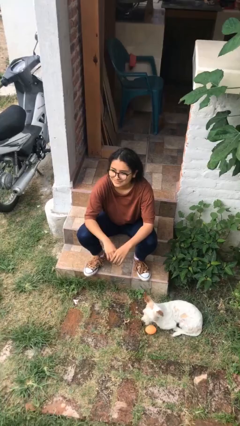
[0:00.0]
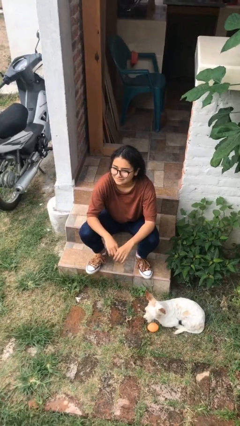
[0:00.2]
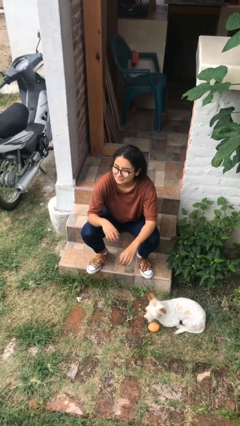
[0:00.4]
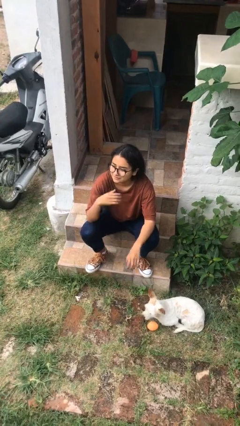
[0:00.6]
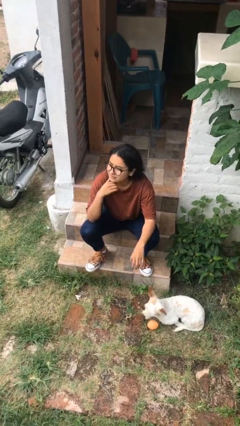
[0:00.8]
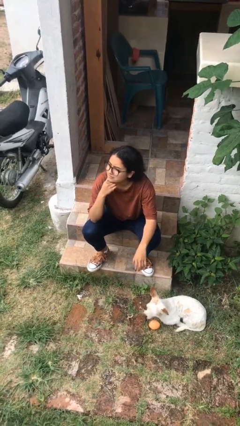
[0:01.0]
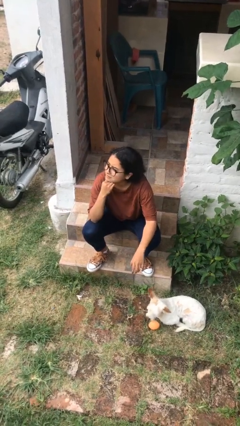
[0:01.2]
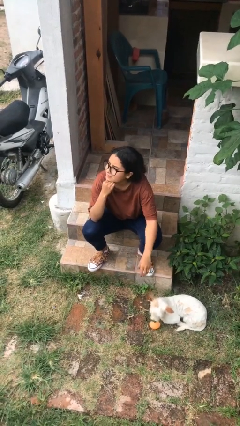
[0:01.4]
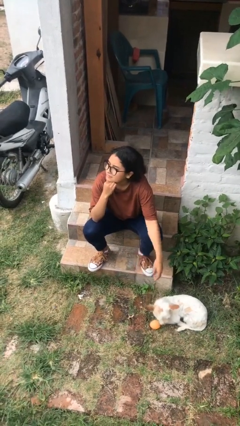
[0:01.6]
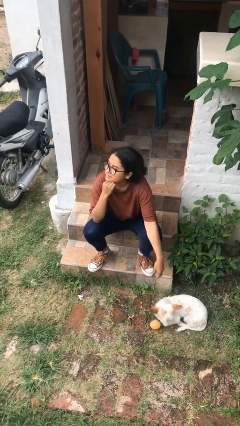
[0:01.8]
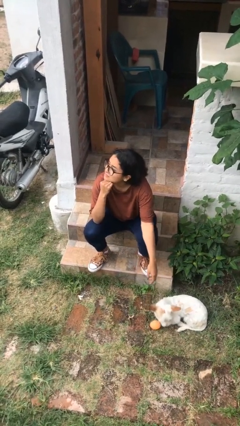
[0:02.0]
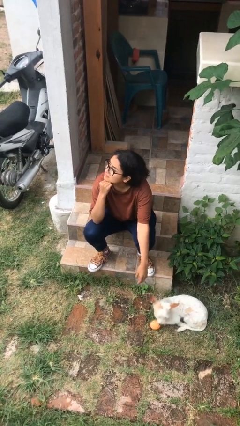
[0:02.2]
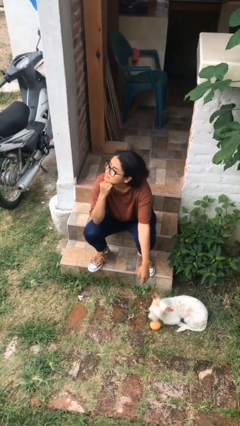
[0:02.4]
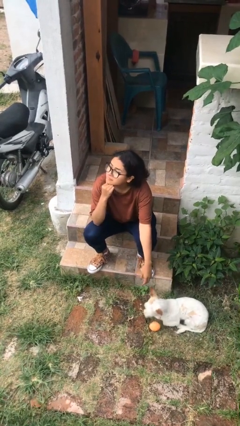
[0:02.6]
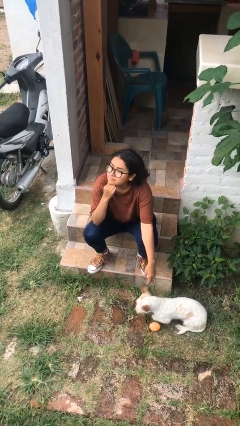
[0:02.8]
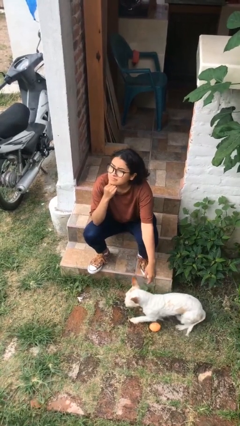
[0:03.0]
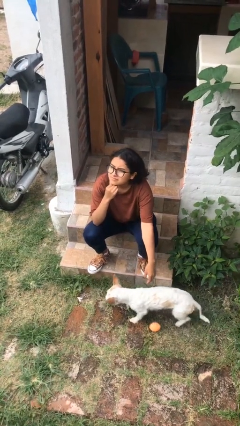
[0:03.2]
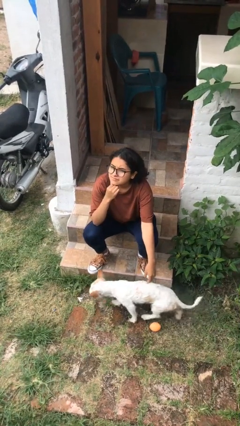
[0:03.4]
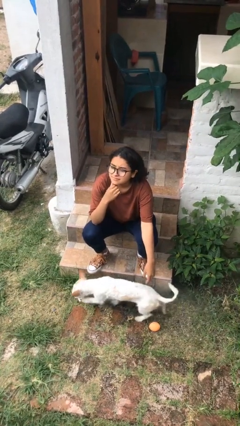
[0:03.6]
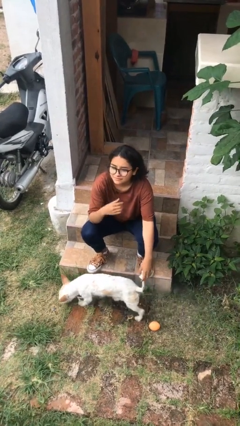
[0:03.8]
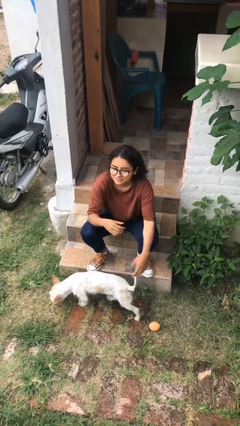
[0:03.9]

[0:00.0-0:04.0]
person strokes chin

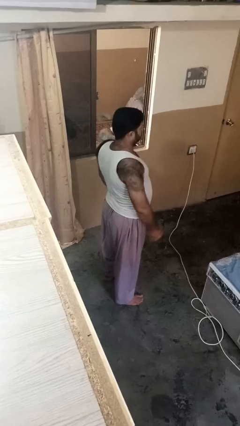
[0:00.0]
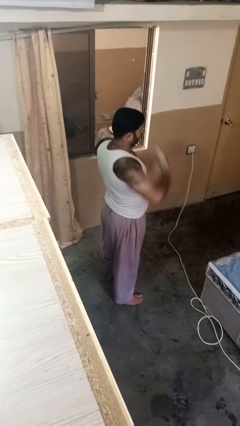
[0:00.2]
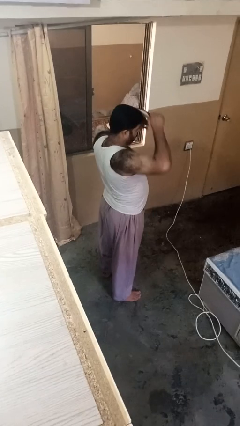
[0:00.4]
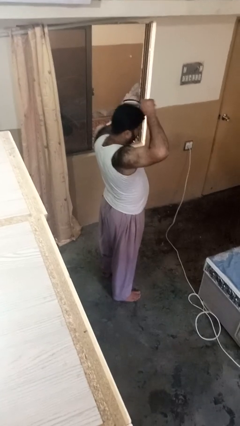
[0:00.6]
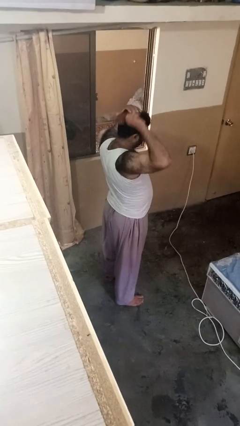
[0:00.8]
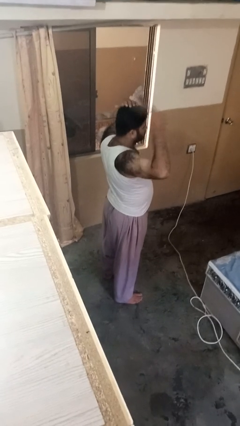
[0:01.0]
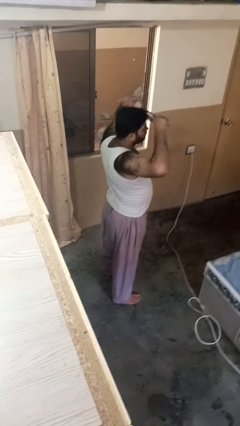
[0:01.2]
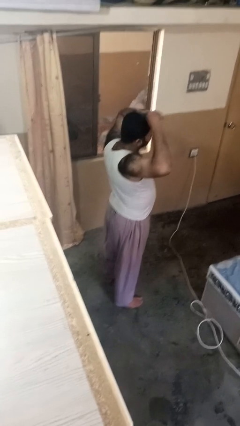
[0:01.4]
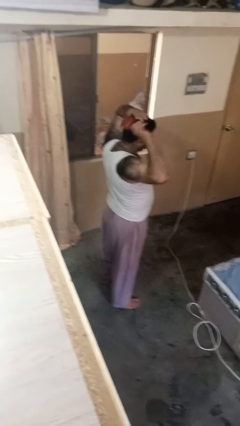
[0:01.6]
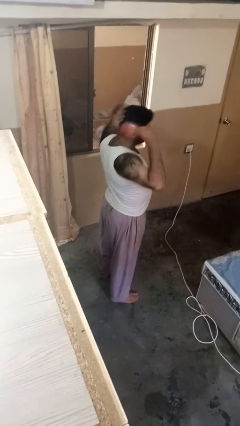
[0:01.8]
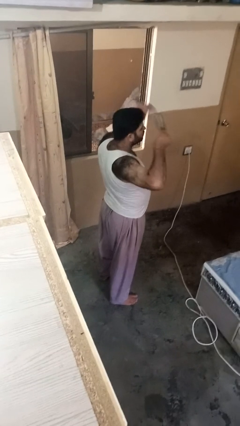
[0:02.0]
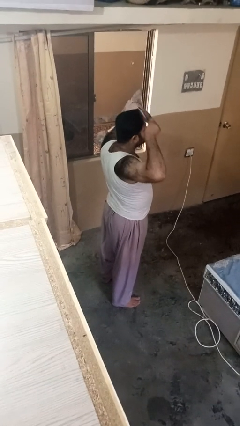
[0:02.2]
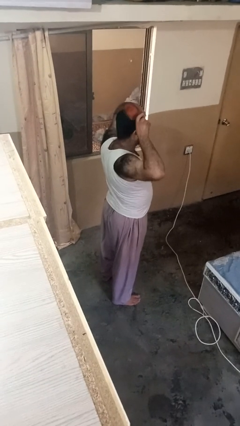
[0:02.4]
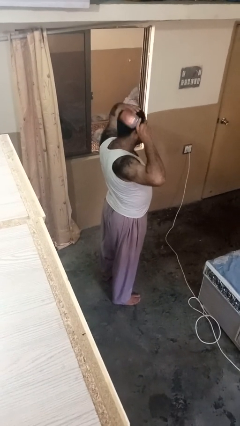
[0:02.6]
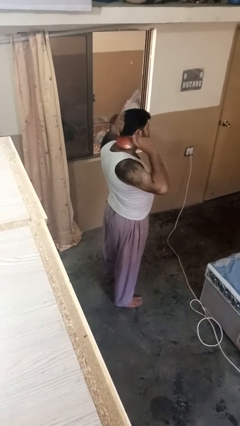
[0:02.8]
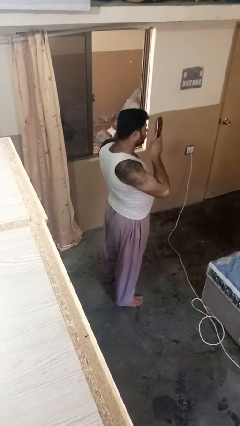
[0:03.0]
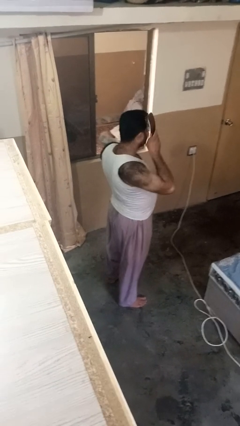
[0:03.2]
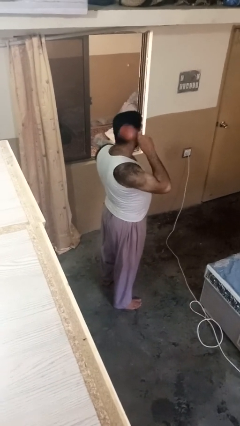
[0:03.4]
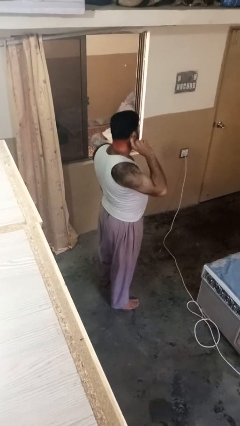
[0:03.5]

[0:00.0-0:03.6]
person brushes hair

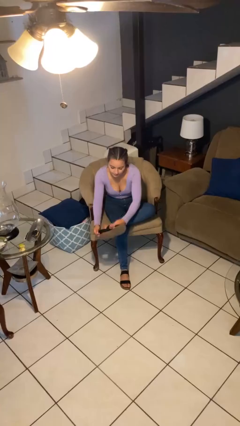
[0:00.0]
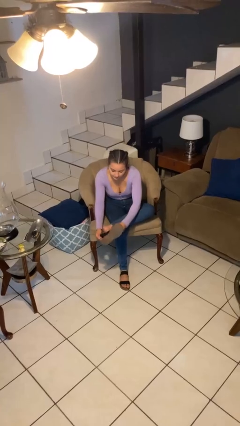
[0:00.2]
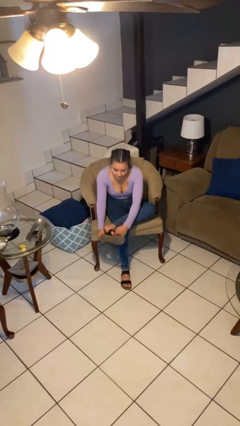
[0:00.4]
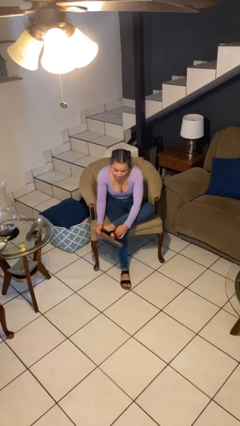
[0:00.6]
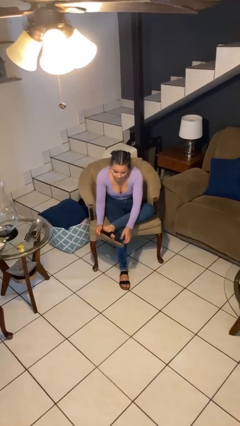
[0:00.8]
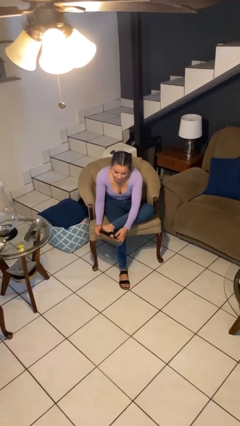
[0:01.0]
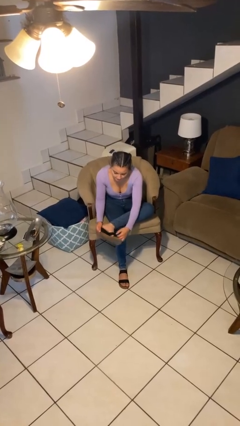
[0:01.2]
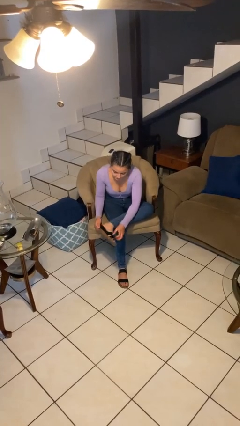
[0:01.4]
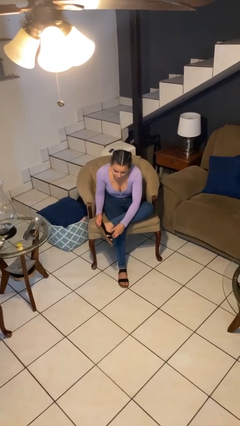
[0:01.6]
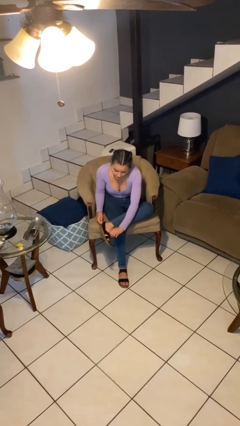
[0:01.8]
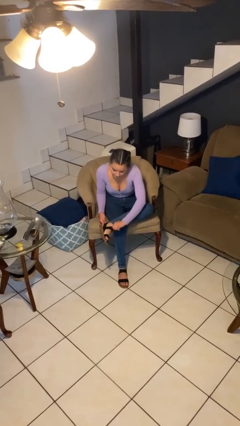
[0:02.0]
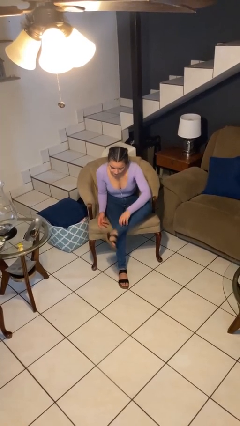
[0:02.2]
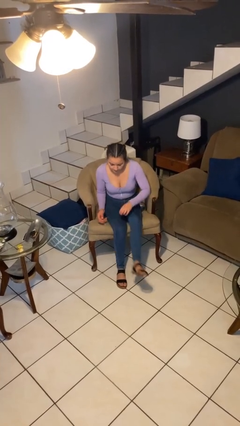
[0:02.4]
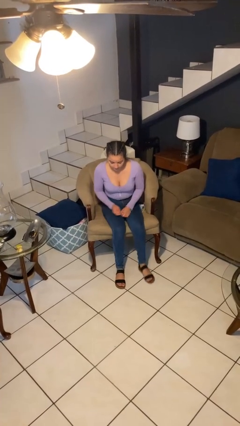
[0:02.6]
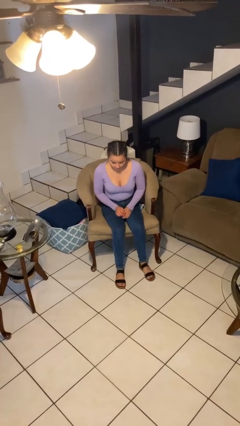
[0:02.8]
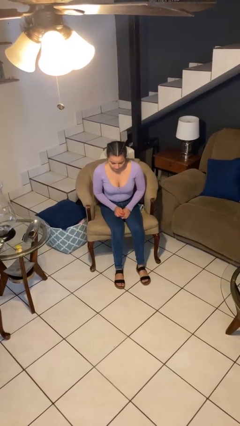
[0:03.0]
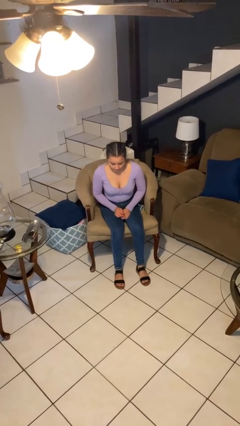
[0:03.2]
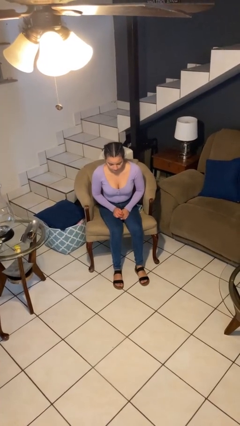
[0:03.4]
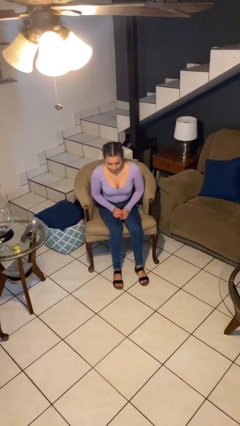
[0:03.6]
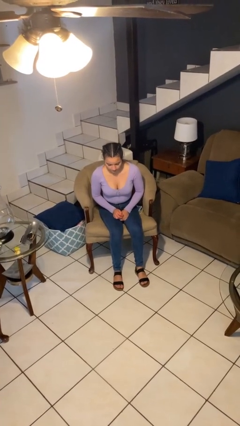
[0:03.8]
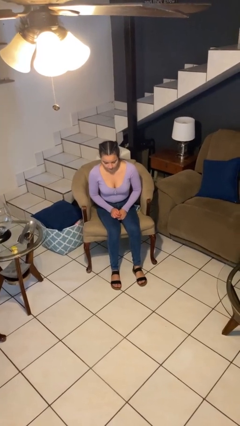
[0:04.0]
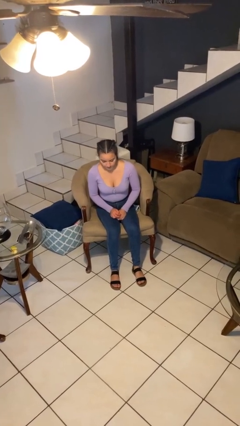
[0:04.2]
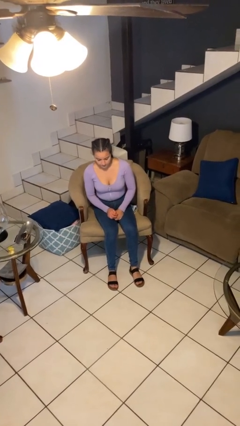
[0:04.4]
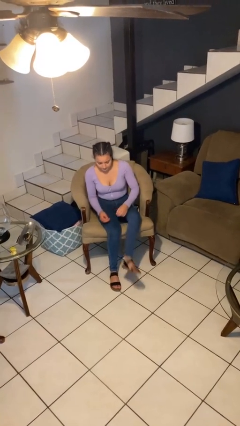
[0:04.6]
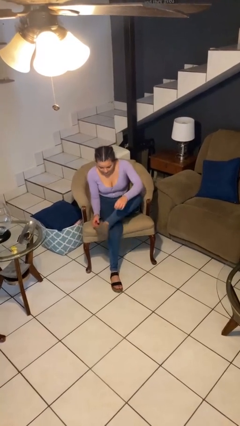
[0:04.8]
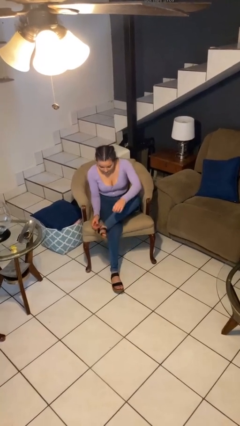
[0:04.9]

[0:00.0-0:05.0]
person puts on shoes

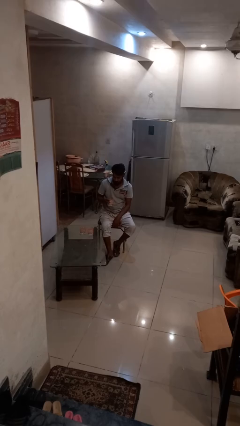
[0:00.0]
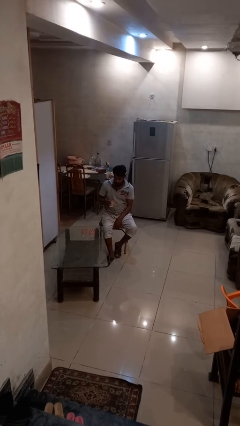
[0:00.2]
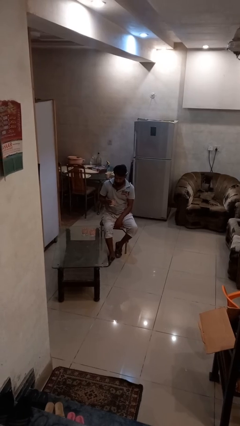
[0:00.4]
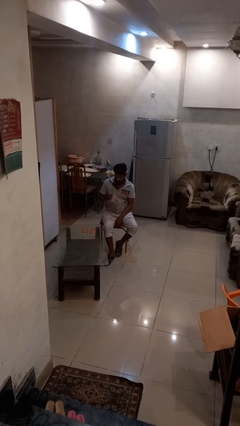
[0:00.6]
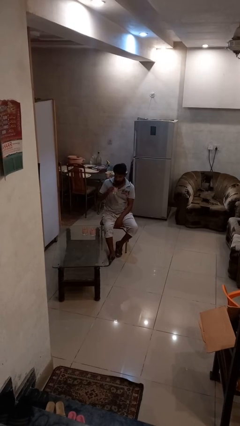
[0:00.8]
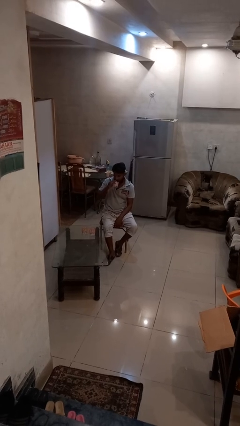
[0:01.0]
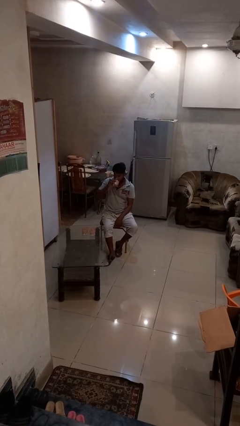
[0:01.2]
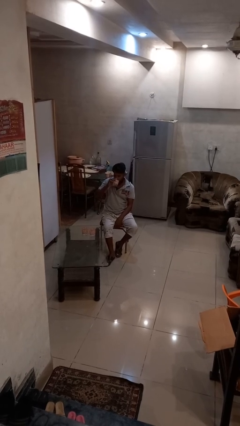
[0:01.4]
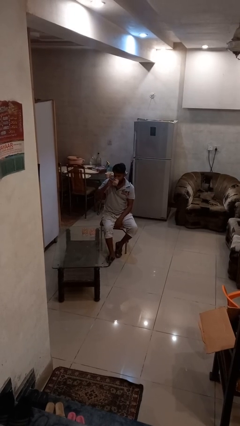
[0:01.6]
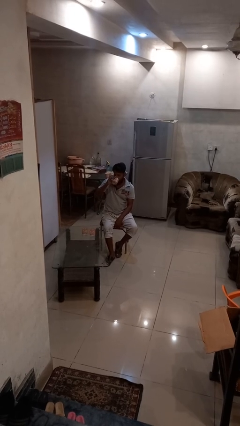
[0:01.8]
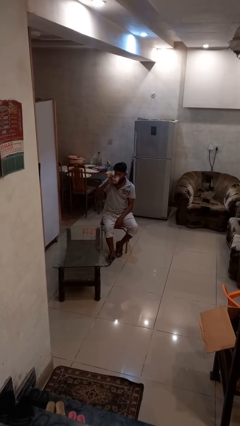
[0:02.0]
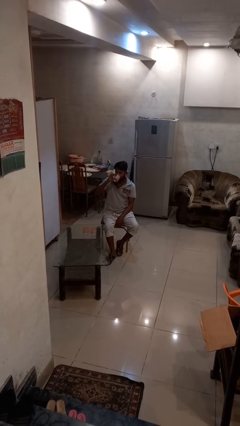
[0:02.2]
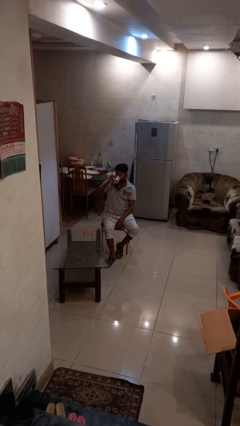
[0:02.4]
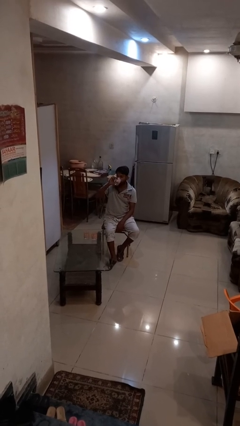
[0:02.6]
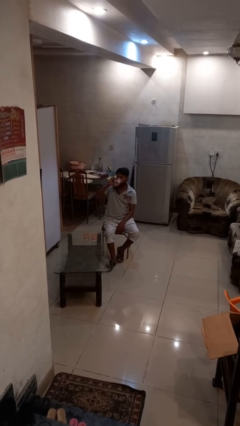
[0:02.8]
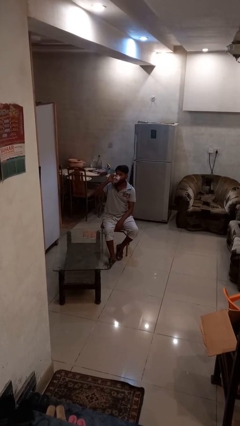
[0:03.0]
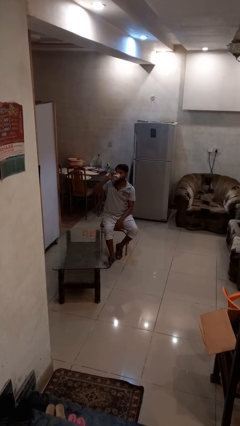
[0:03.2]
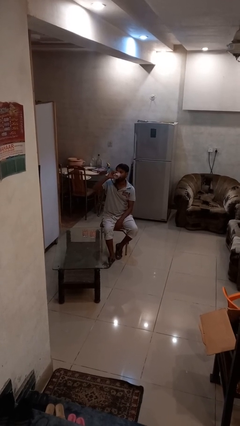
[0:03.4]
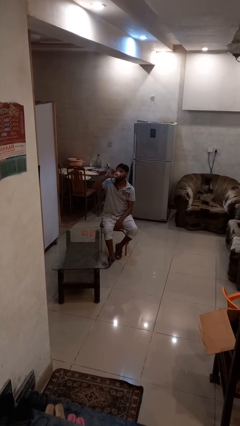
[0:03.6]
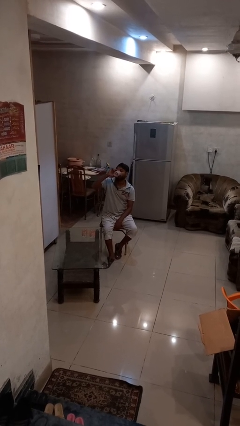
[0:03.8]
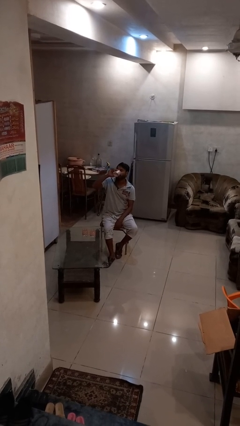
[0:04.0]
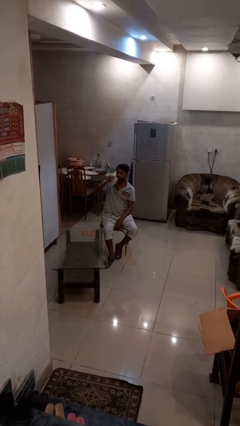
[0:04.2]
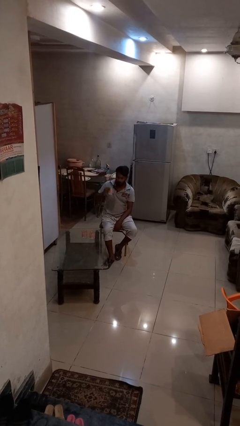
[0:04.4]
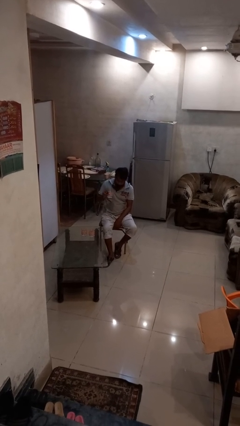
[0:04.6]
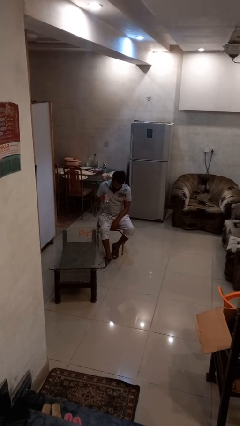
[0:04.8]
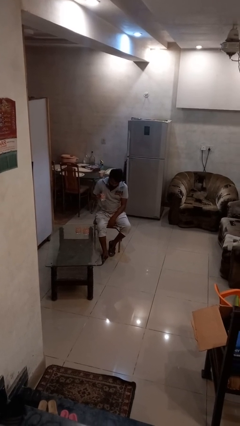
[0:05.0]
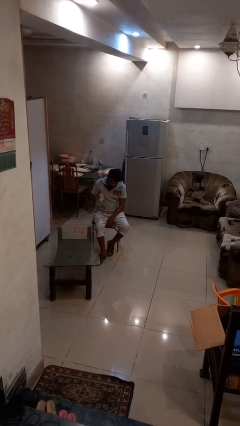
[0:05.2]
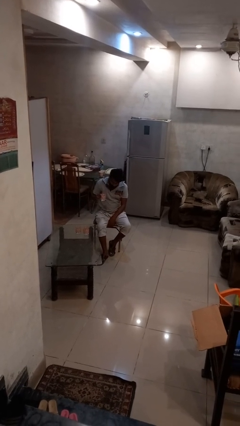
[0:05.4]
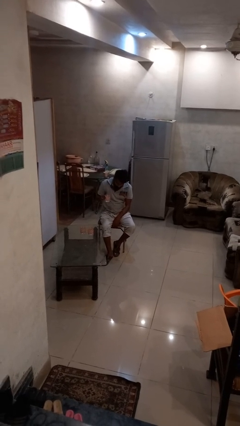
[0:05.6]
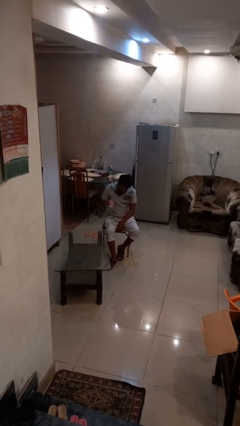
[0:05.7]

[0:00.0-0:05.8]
person drinks from shotglass
